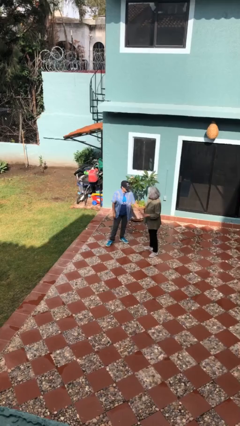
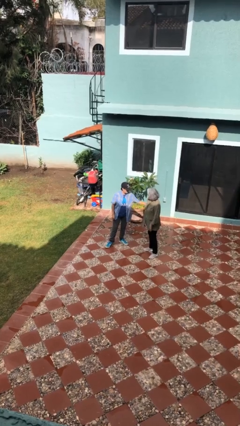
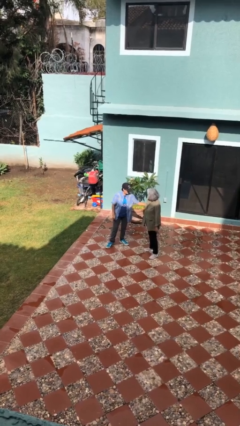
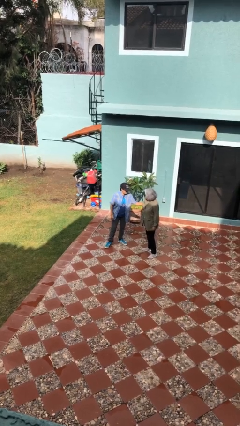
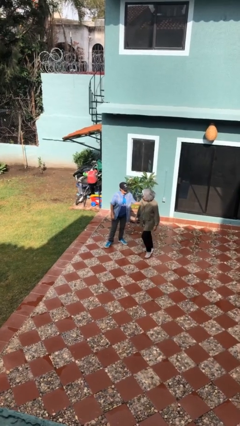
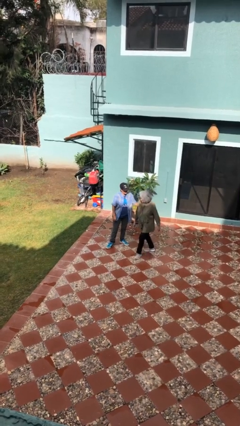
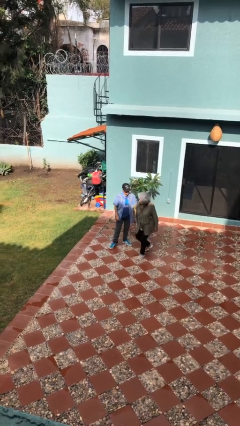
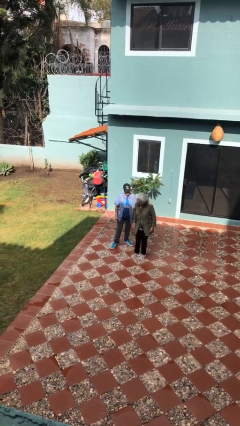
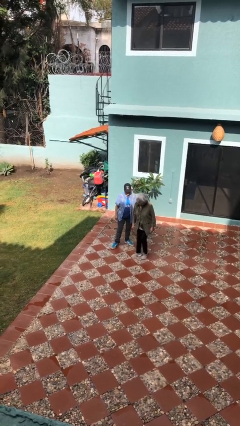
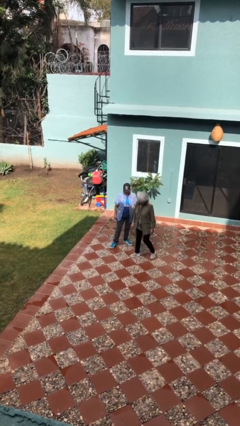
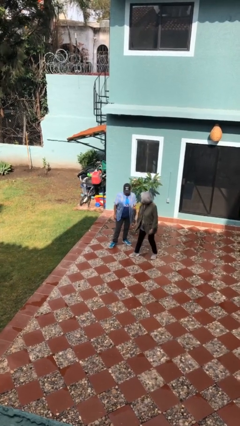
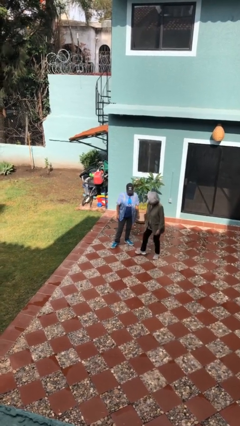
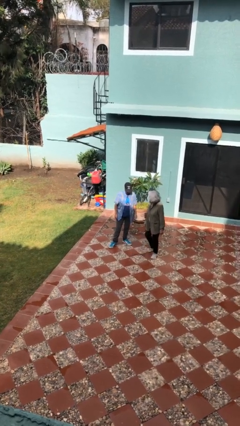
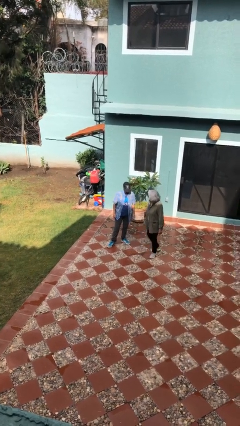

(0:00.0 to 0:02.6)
person grabs person by bicep

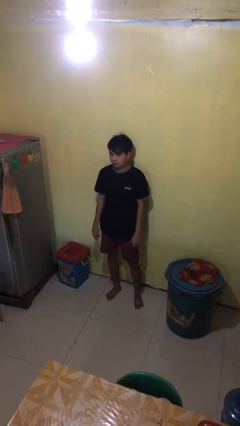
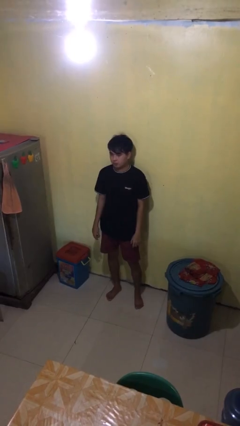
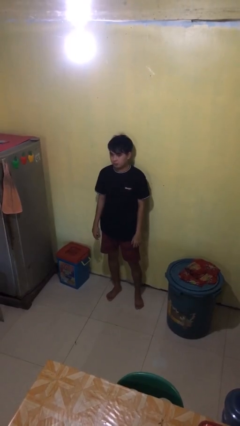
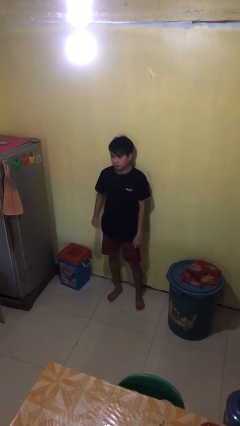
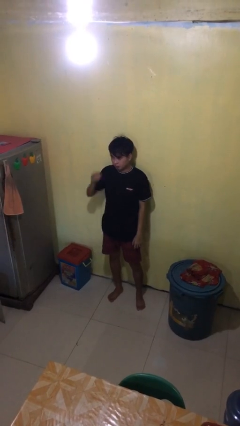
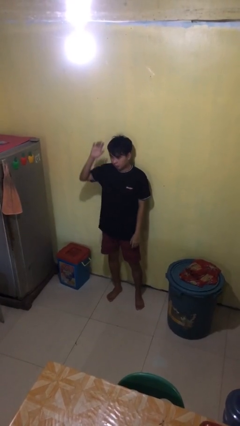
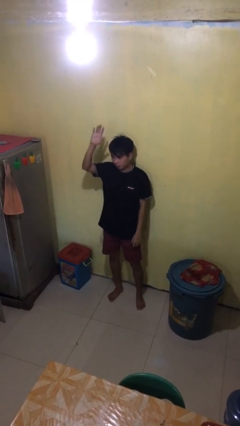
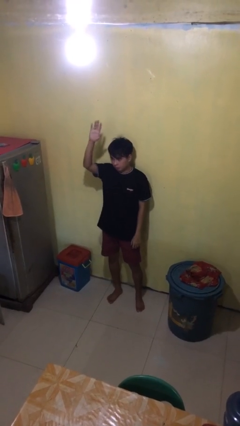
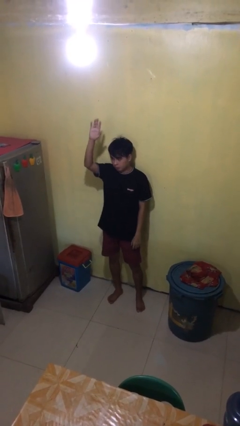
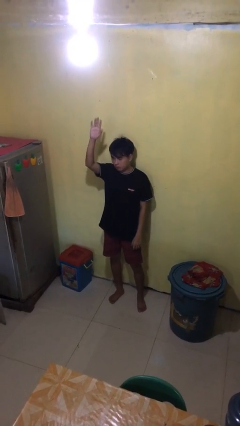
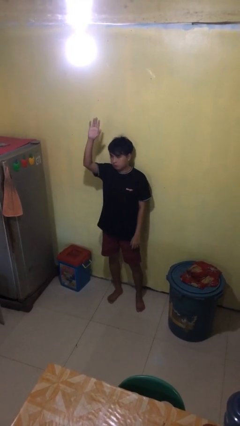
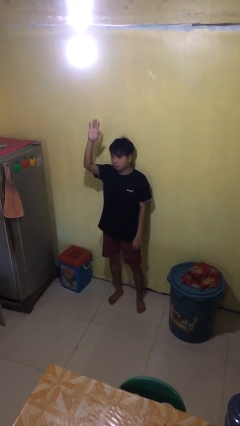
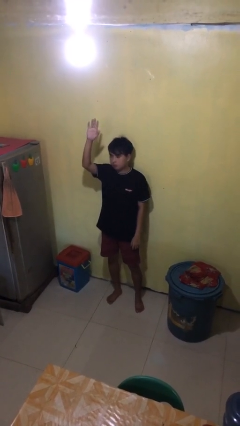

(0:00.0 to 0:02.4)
person gestures raise hand

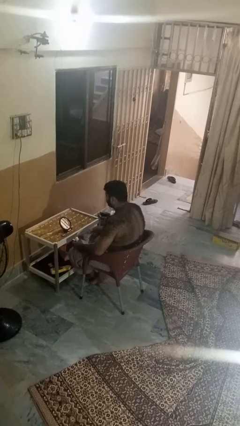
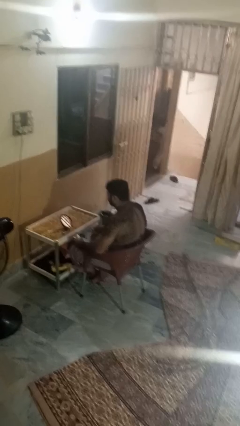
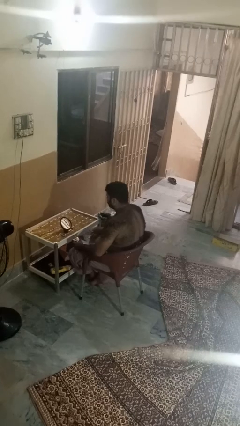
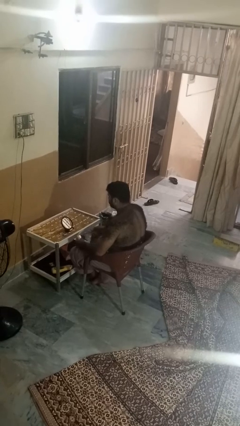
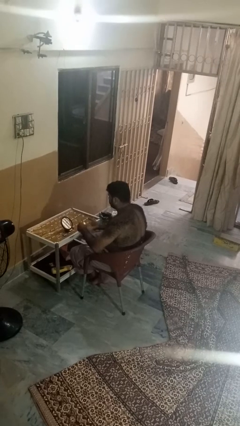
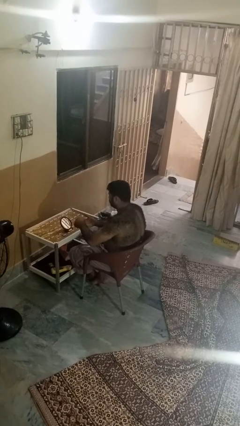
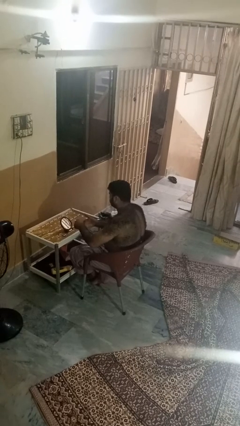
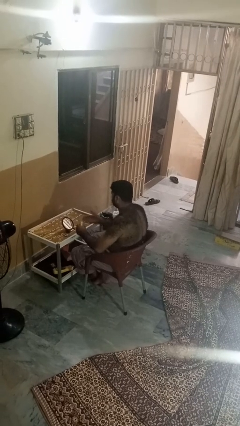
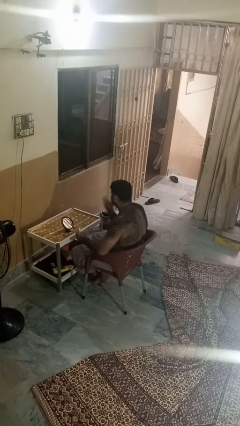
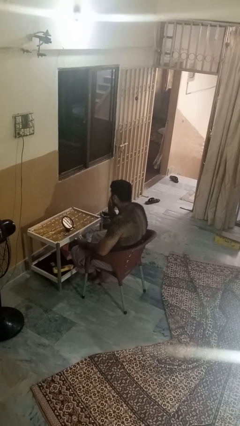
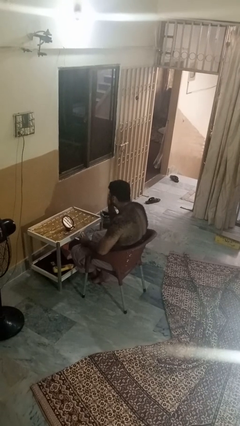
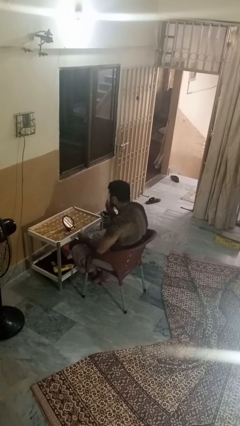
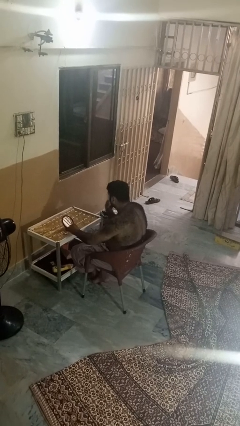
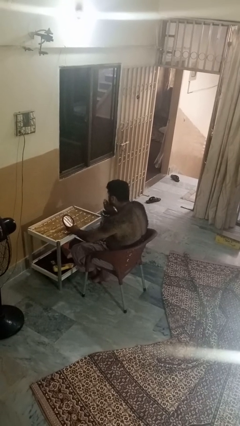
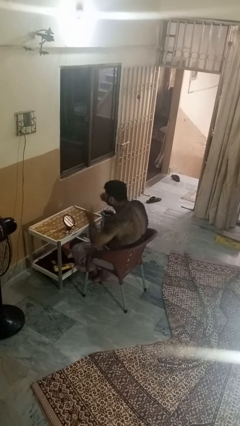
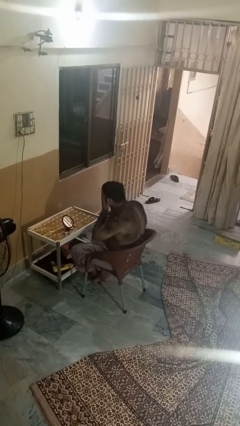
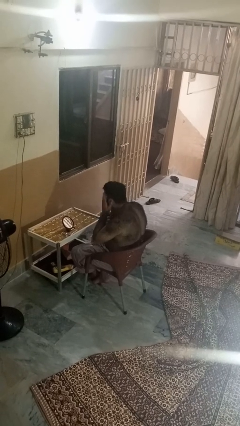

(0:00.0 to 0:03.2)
person applies foundation makeup

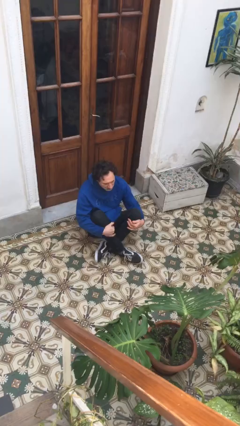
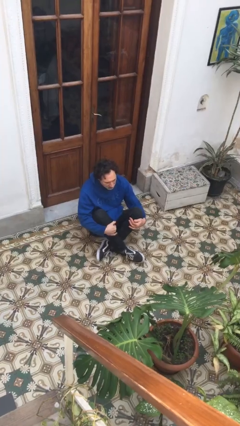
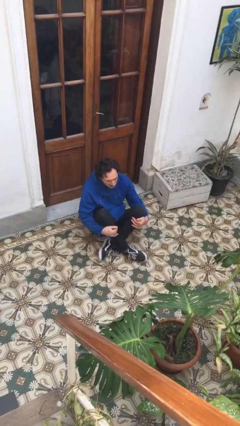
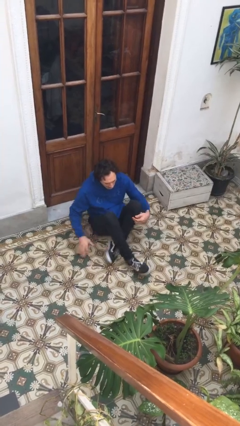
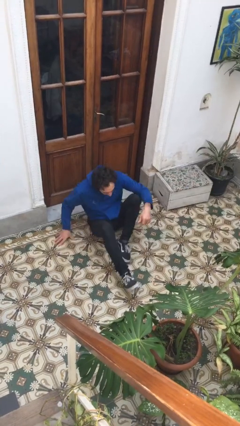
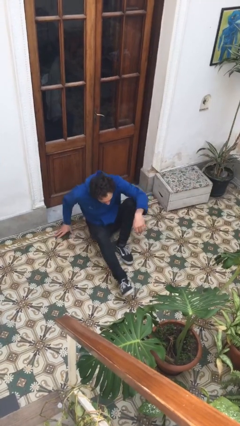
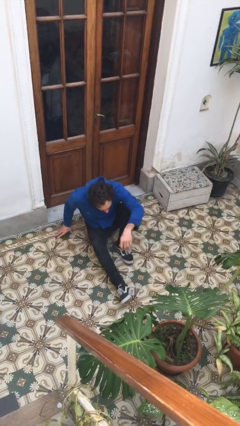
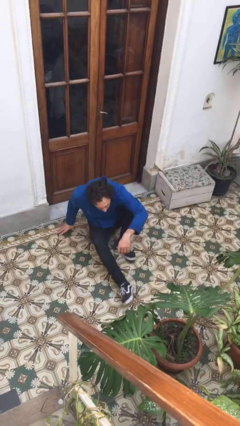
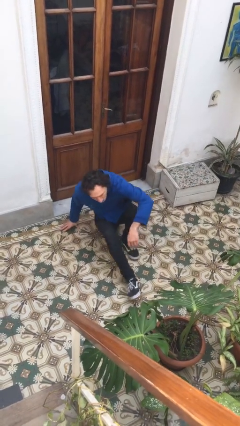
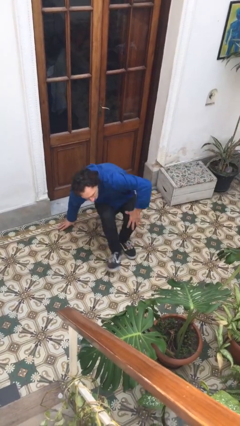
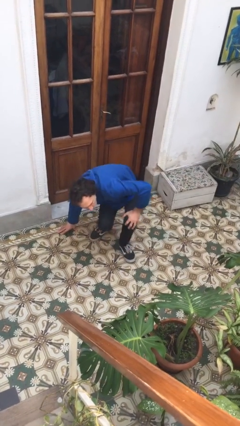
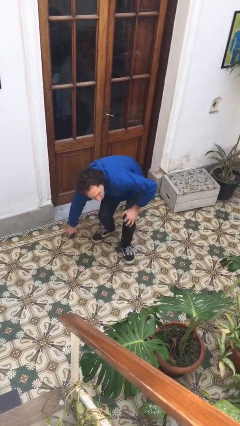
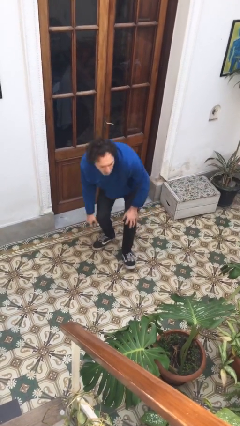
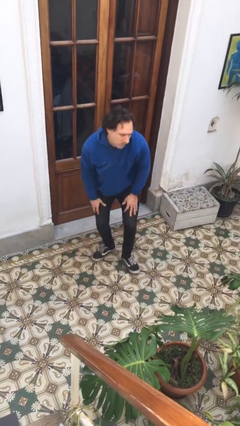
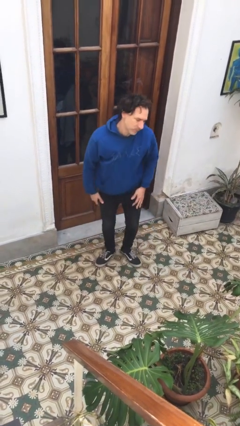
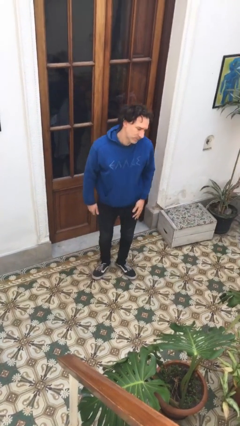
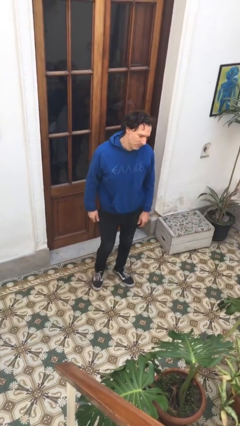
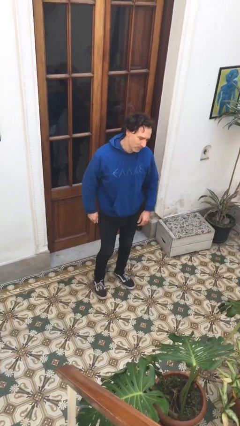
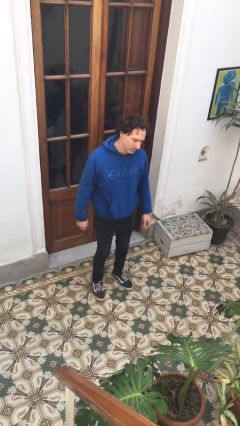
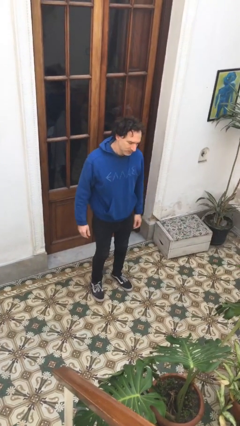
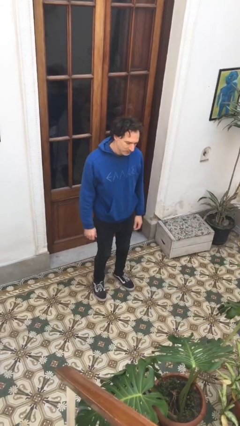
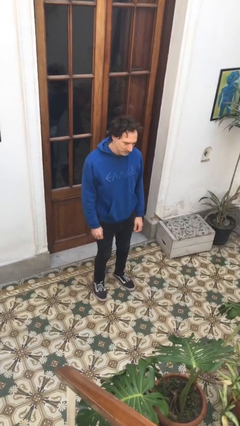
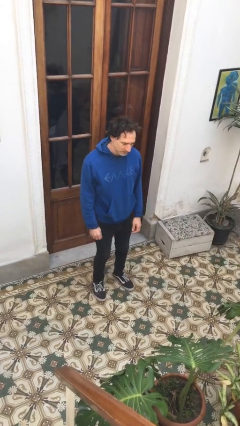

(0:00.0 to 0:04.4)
person stands up from floor

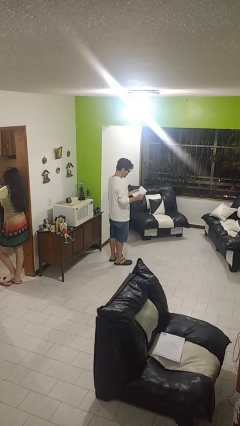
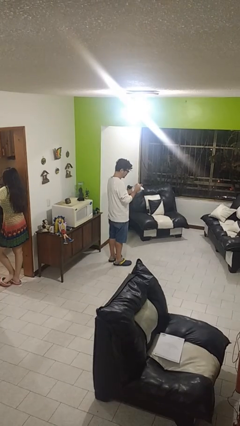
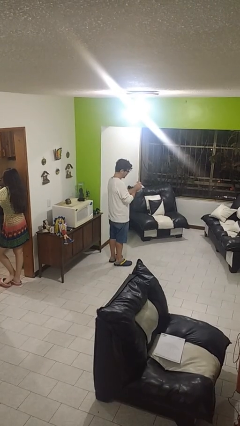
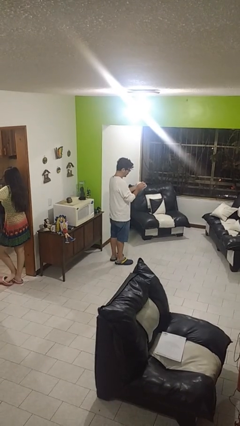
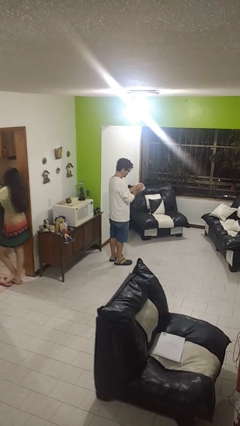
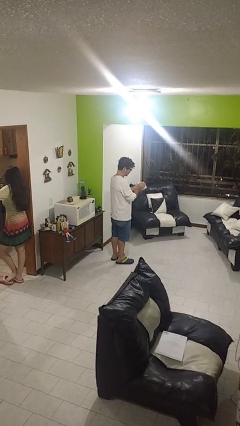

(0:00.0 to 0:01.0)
person crumples paper

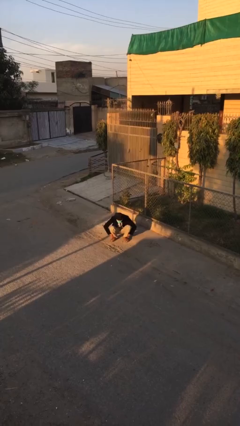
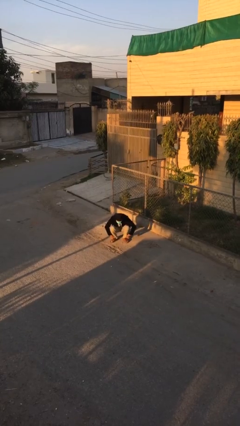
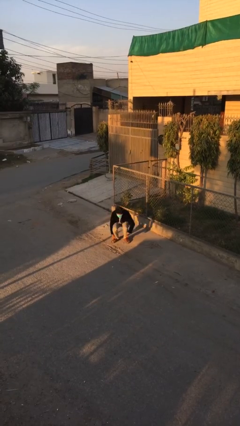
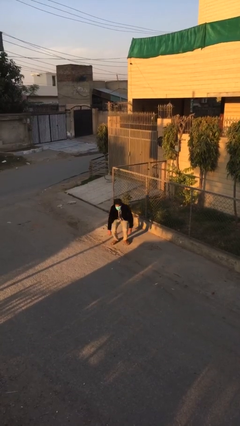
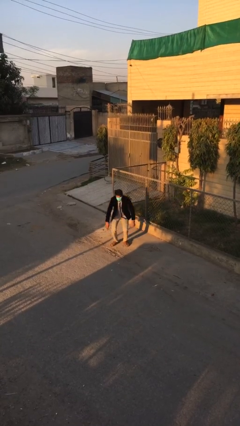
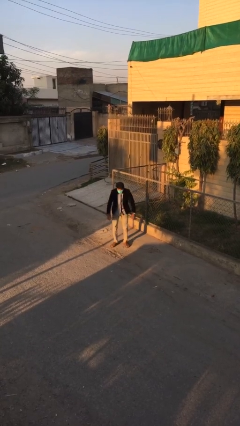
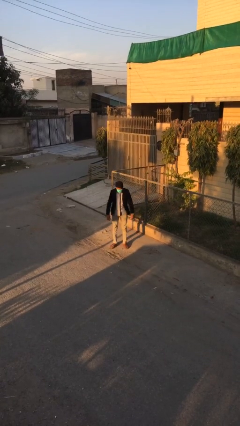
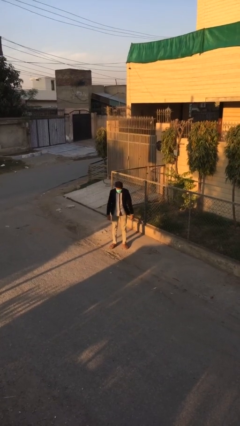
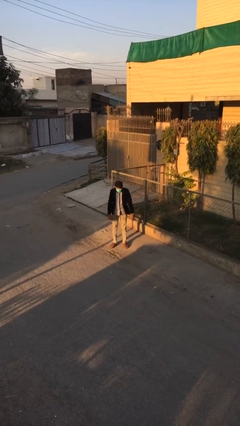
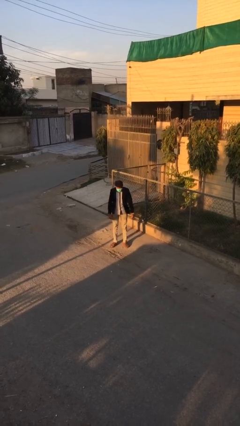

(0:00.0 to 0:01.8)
person stands up

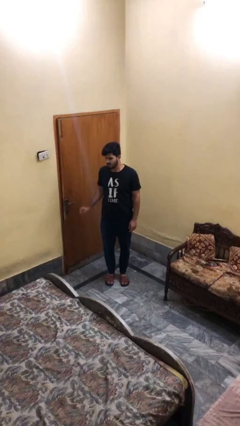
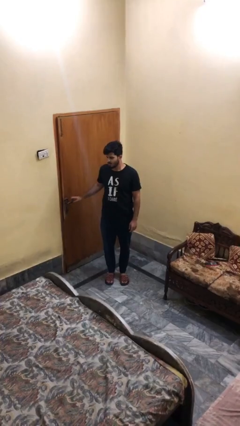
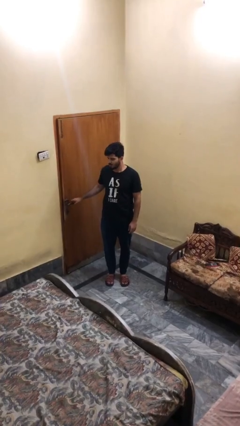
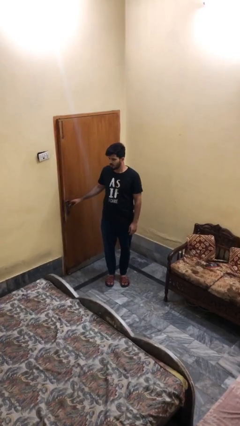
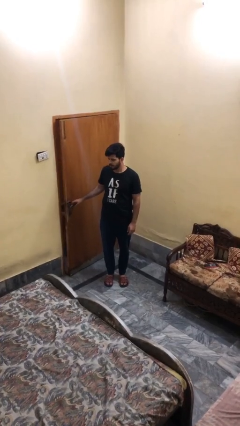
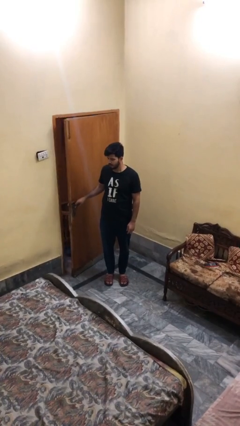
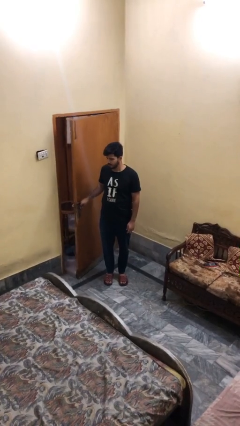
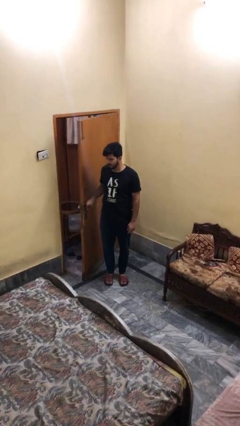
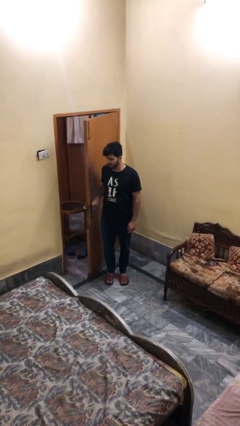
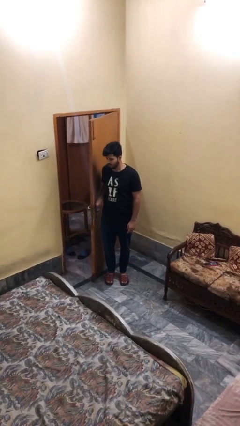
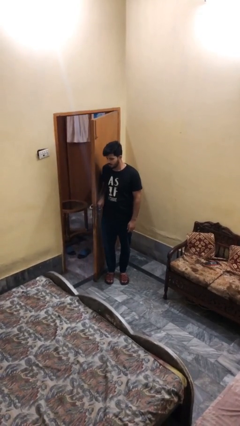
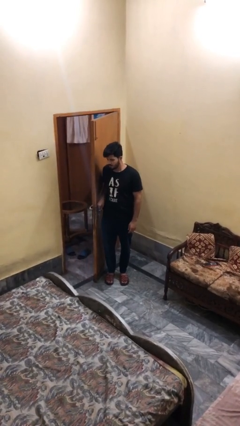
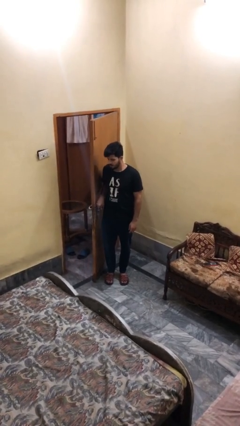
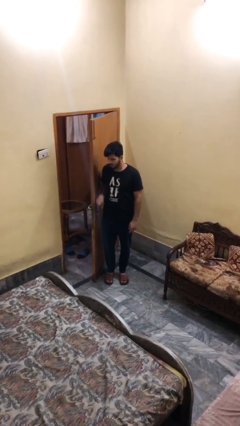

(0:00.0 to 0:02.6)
person opens facility door
